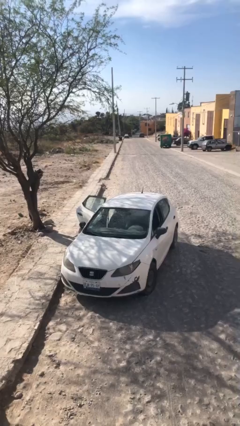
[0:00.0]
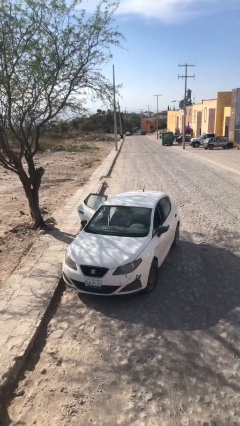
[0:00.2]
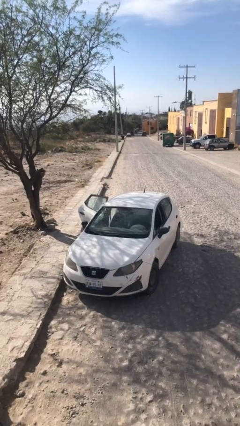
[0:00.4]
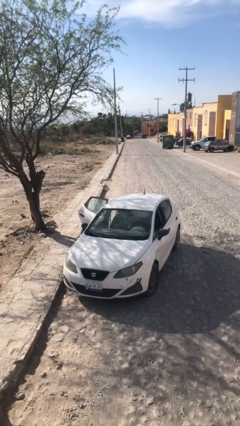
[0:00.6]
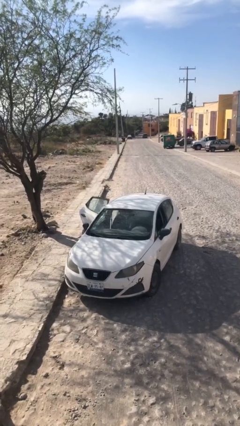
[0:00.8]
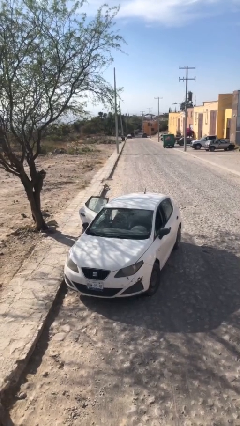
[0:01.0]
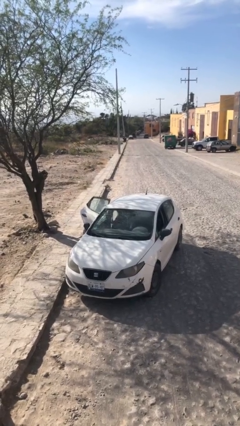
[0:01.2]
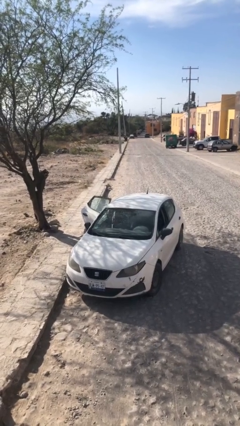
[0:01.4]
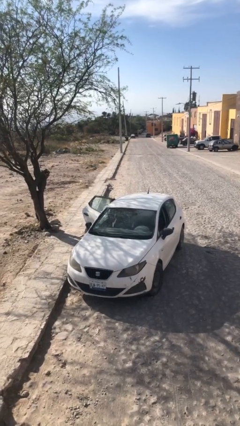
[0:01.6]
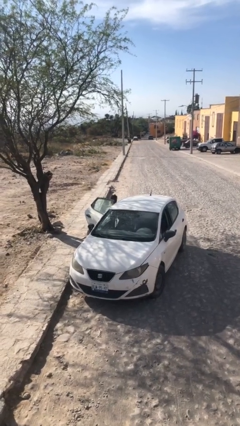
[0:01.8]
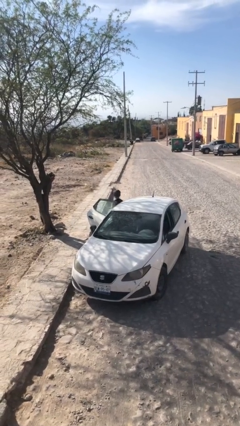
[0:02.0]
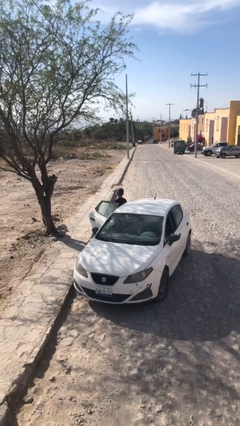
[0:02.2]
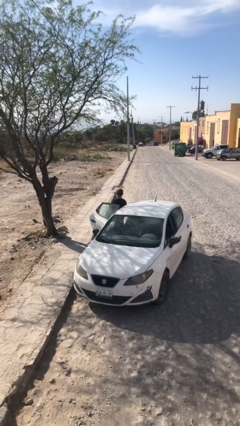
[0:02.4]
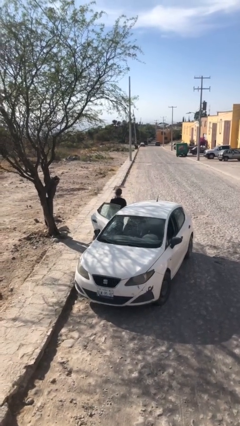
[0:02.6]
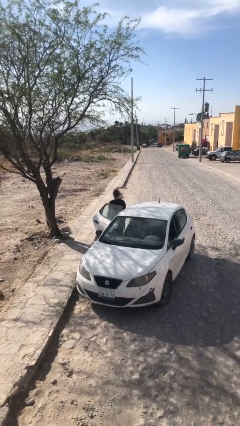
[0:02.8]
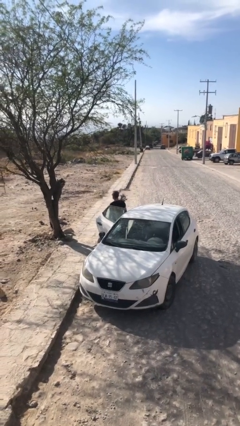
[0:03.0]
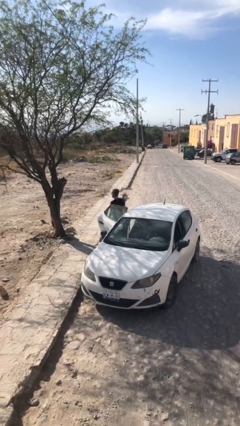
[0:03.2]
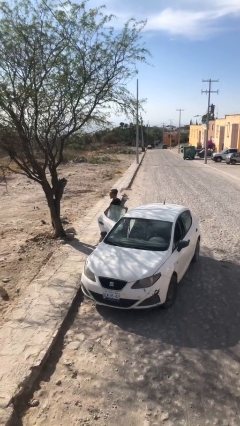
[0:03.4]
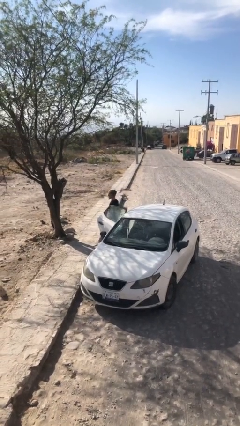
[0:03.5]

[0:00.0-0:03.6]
person exits car

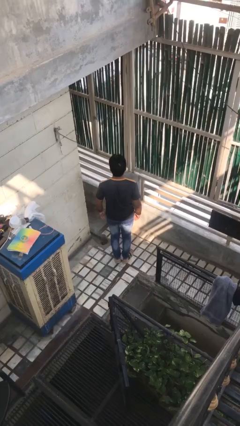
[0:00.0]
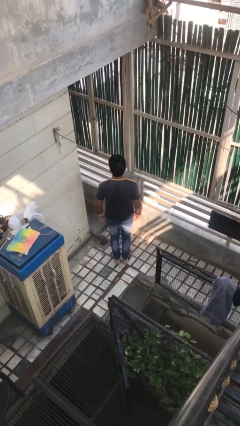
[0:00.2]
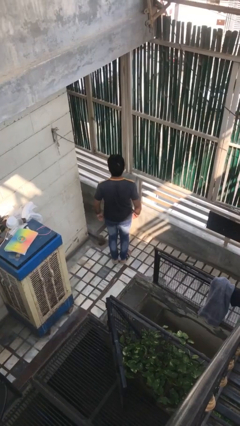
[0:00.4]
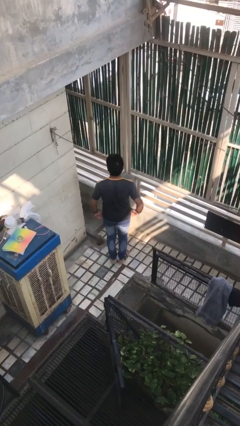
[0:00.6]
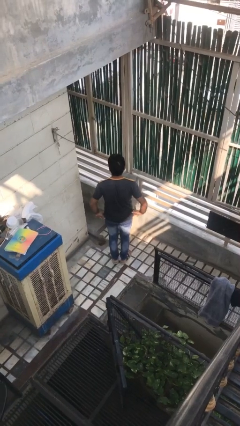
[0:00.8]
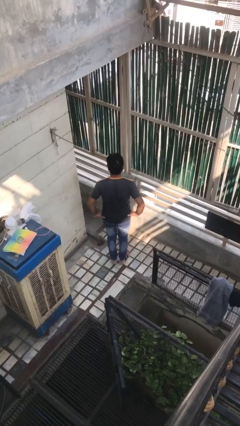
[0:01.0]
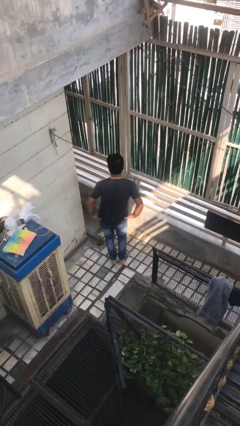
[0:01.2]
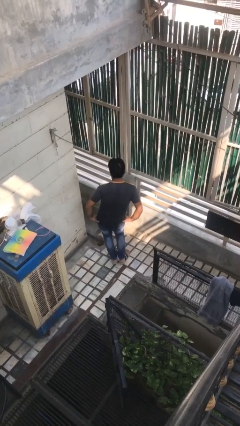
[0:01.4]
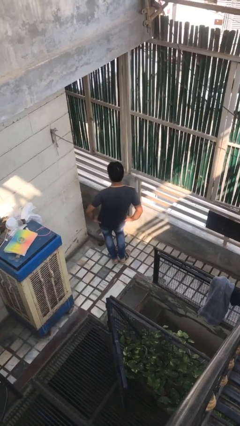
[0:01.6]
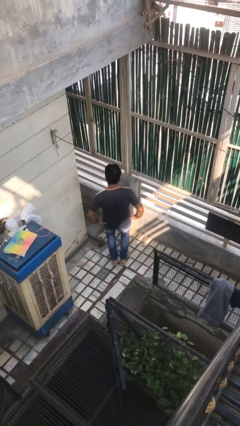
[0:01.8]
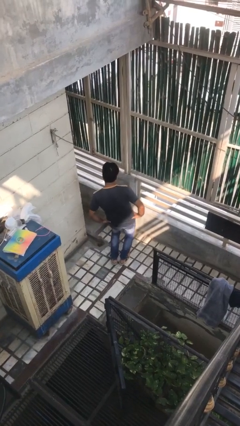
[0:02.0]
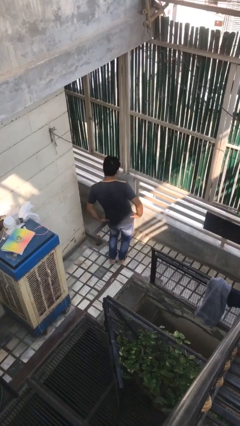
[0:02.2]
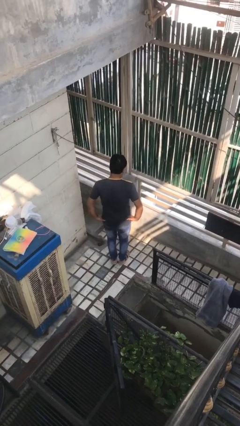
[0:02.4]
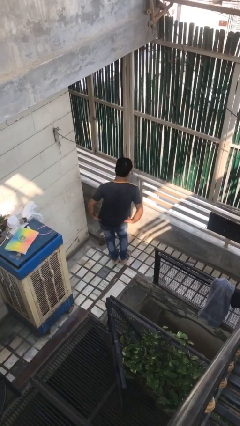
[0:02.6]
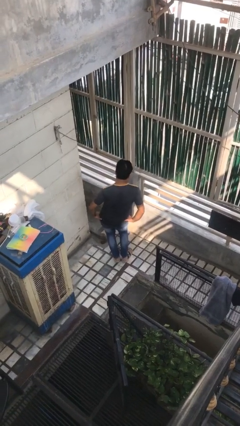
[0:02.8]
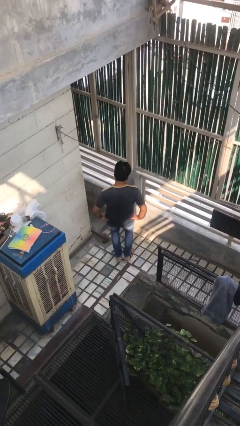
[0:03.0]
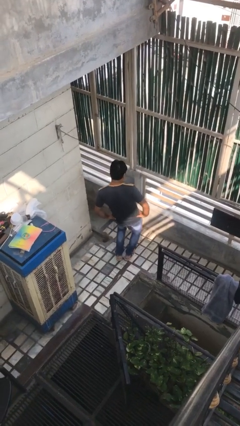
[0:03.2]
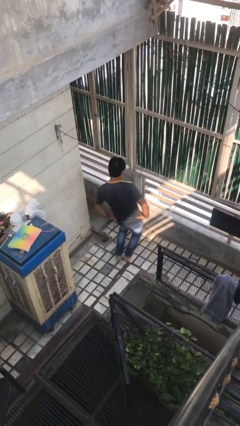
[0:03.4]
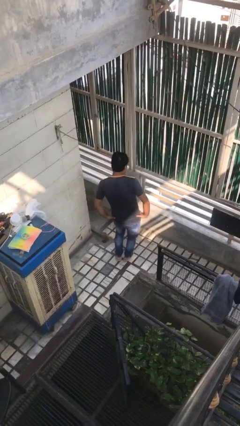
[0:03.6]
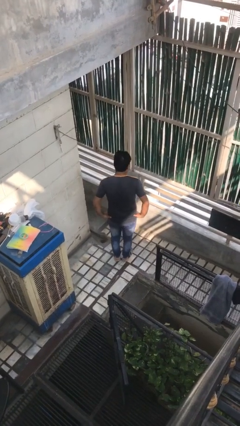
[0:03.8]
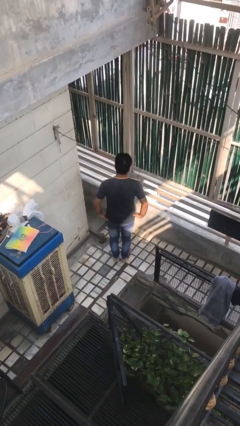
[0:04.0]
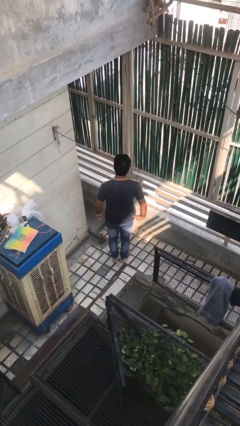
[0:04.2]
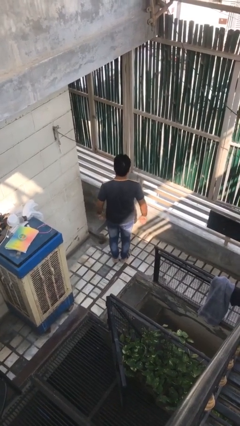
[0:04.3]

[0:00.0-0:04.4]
person wiggles hips

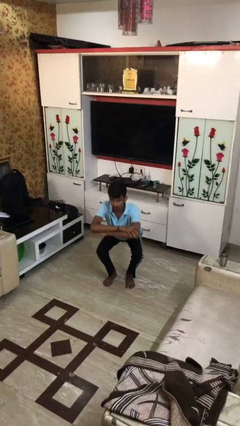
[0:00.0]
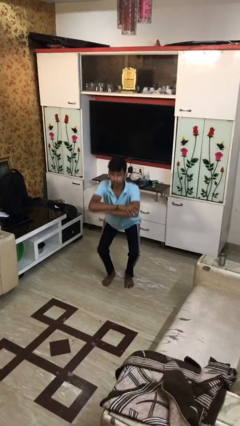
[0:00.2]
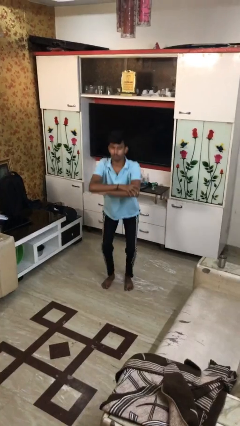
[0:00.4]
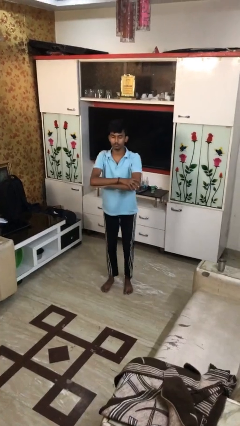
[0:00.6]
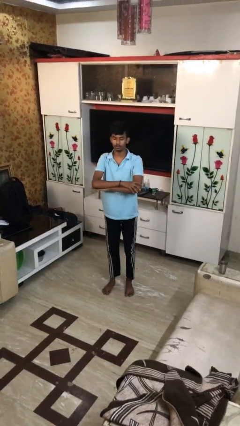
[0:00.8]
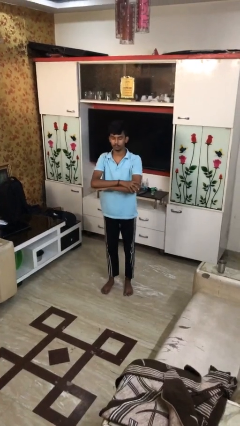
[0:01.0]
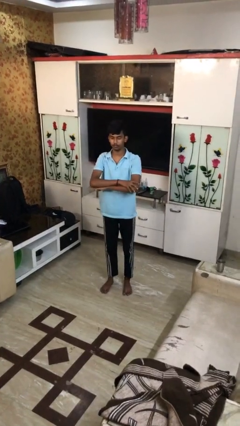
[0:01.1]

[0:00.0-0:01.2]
person stands up

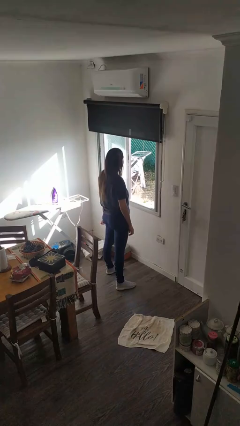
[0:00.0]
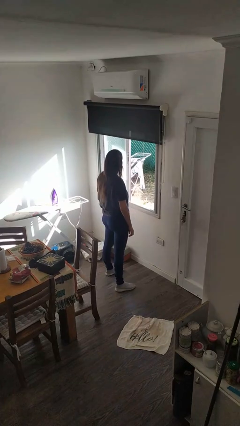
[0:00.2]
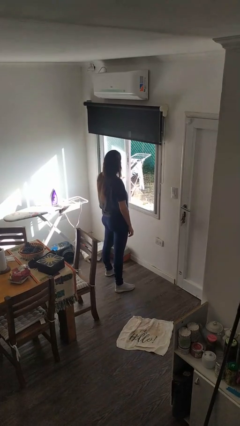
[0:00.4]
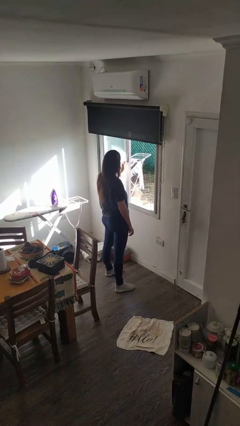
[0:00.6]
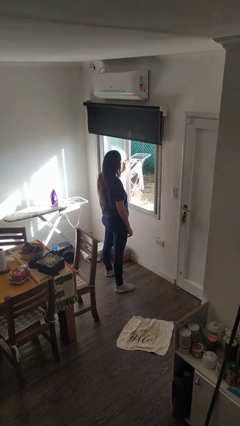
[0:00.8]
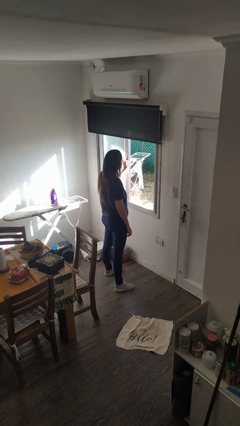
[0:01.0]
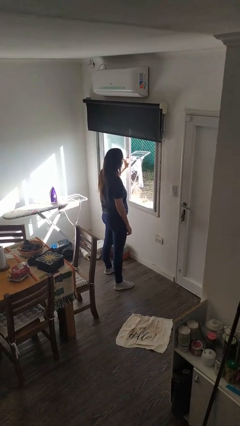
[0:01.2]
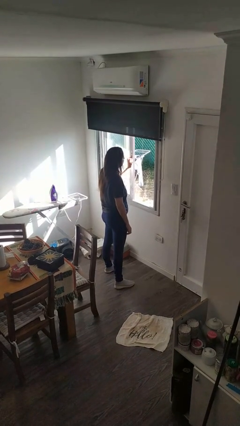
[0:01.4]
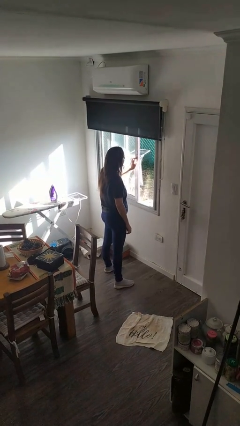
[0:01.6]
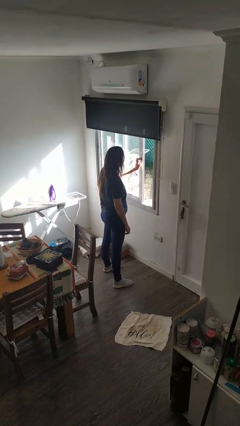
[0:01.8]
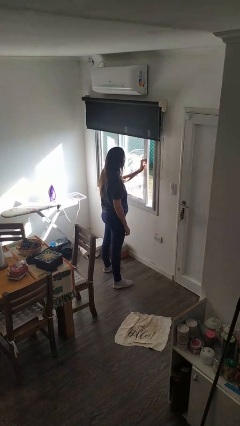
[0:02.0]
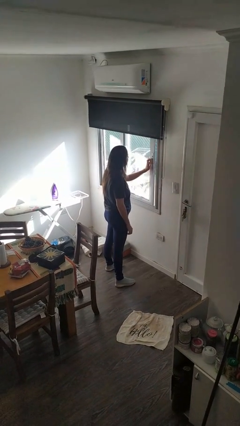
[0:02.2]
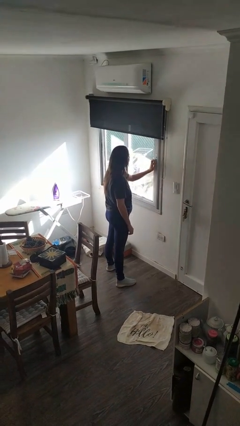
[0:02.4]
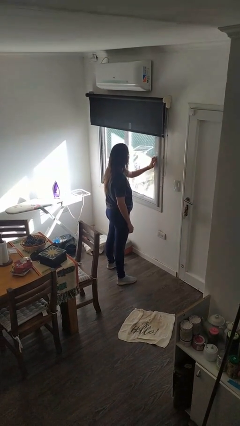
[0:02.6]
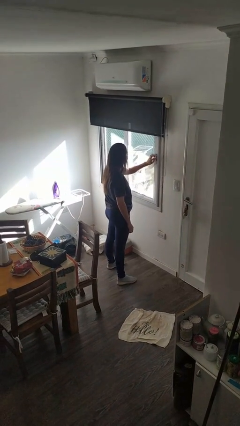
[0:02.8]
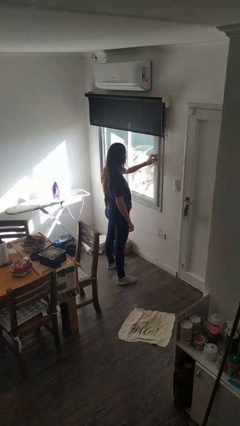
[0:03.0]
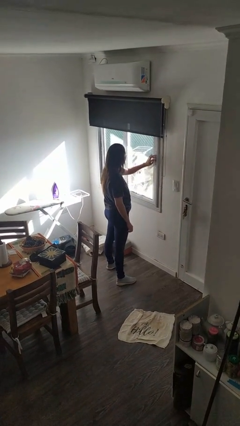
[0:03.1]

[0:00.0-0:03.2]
person closes home window

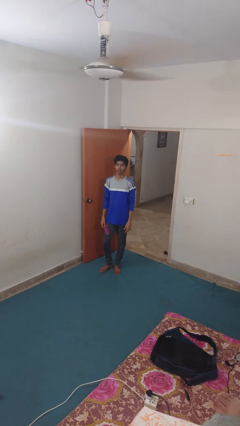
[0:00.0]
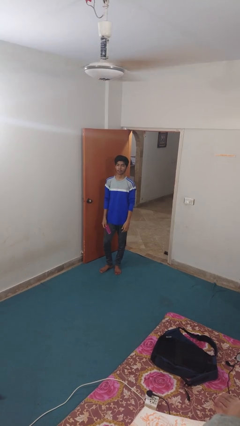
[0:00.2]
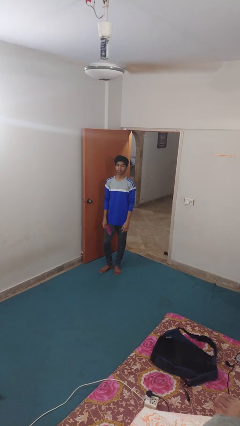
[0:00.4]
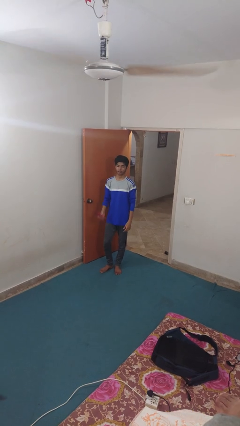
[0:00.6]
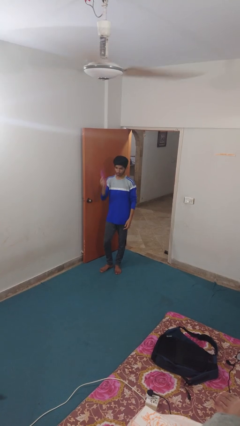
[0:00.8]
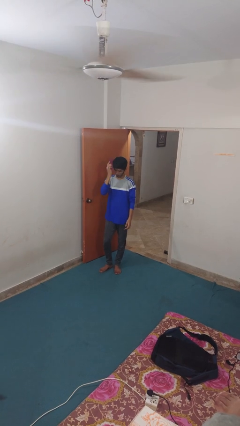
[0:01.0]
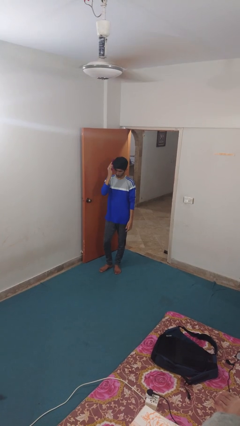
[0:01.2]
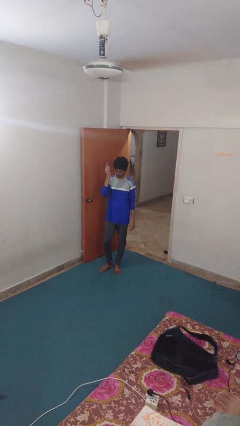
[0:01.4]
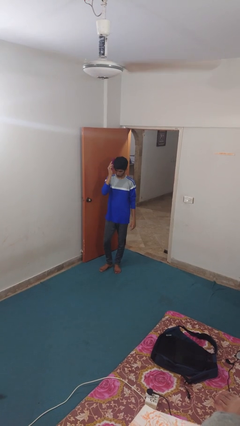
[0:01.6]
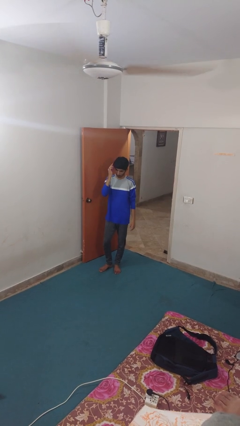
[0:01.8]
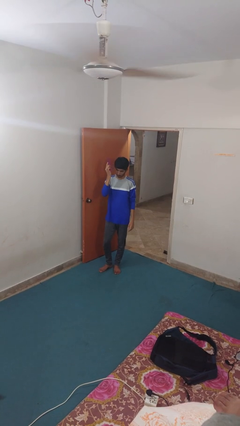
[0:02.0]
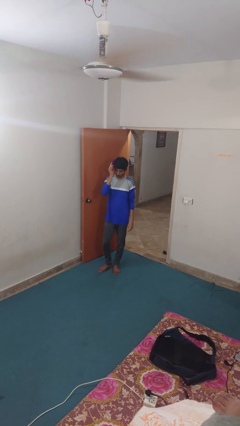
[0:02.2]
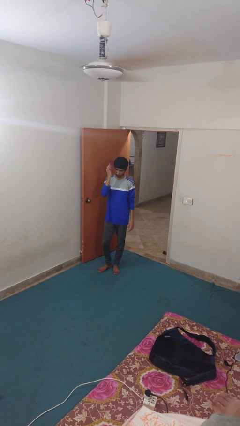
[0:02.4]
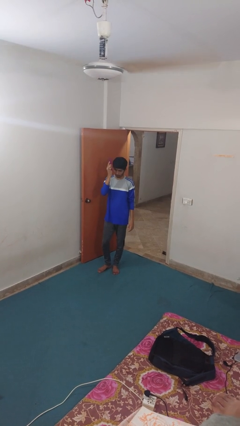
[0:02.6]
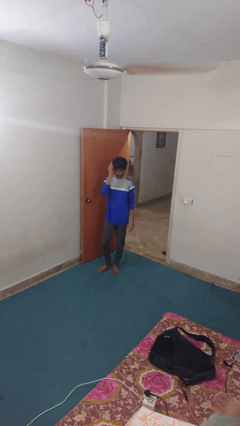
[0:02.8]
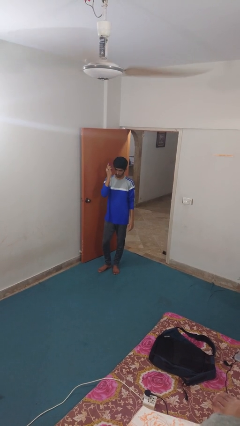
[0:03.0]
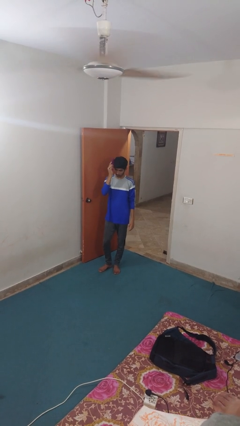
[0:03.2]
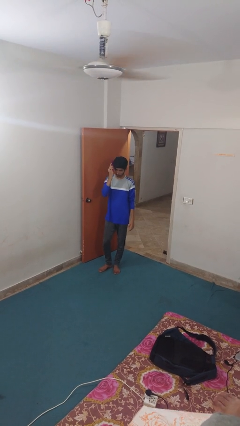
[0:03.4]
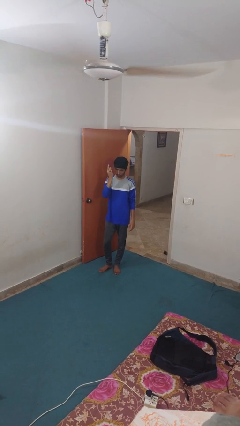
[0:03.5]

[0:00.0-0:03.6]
person brushes hair

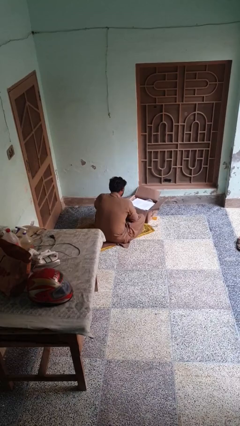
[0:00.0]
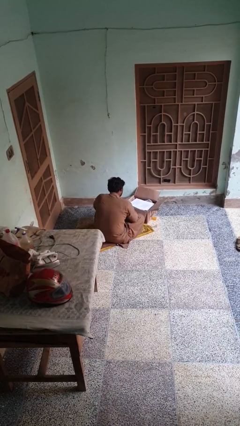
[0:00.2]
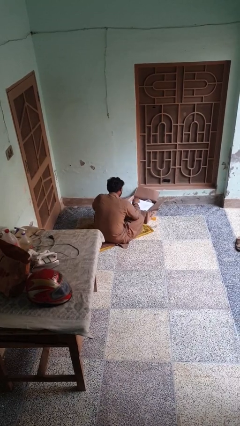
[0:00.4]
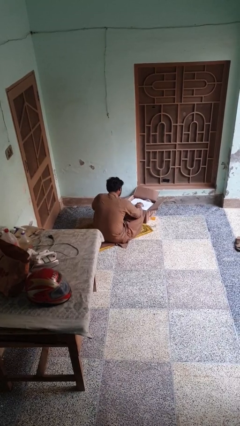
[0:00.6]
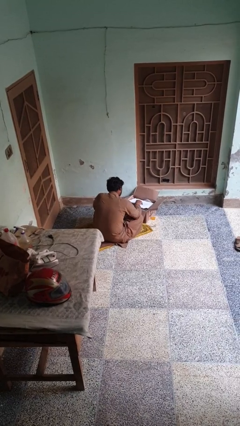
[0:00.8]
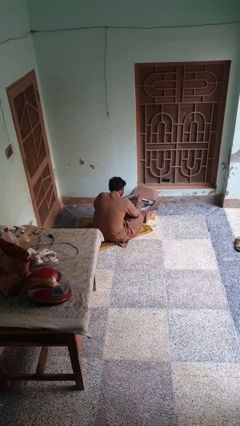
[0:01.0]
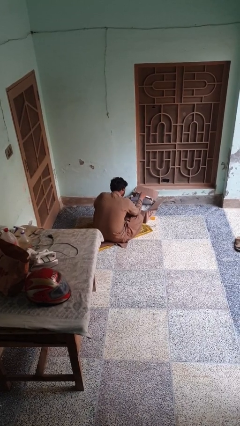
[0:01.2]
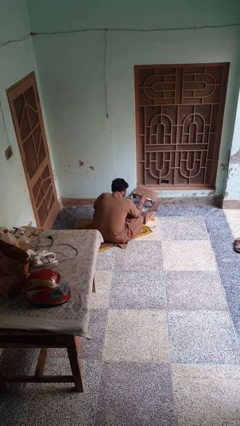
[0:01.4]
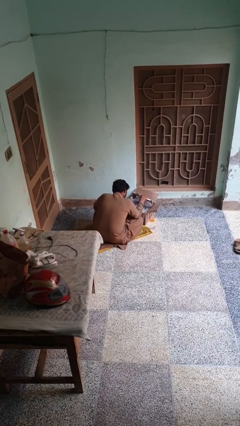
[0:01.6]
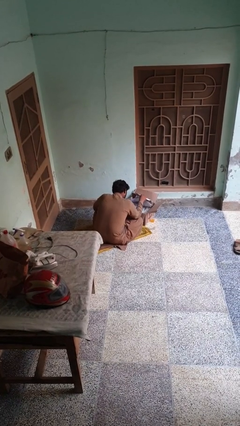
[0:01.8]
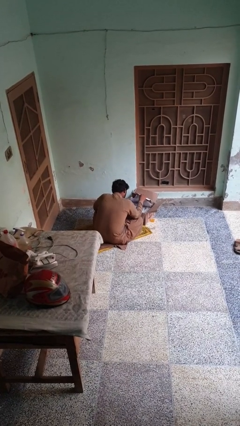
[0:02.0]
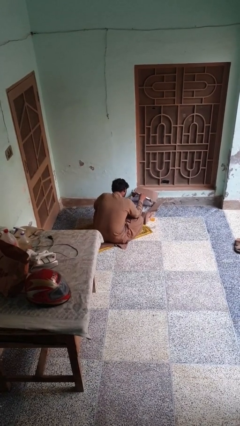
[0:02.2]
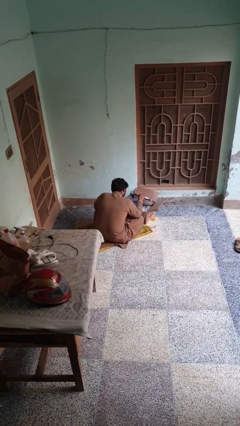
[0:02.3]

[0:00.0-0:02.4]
person searches in box
